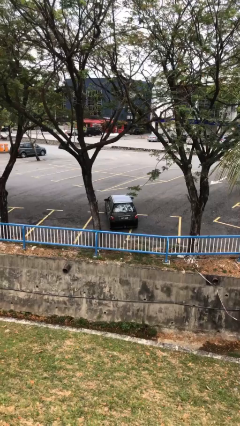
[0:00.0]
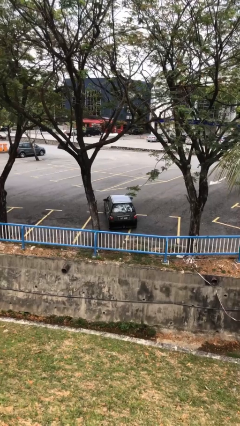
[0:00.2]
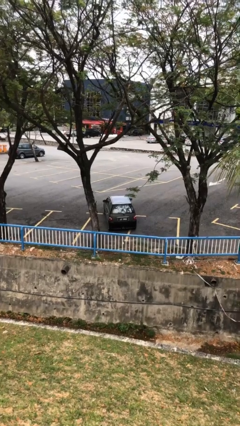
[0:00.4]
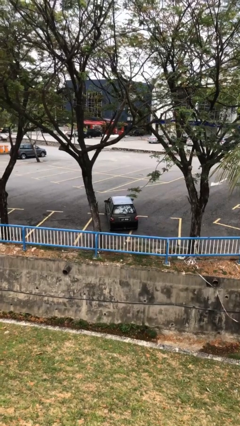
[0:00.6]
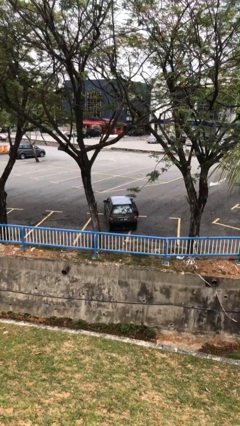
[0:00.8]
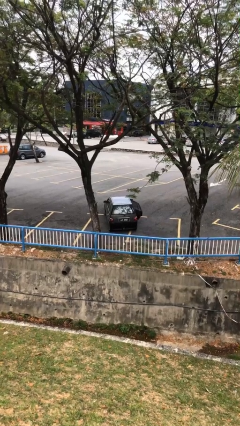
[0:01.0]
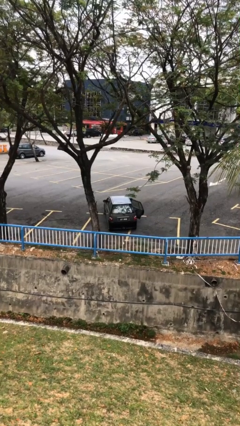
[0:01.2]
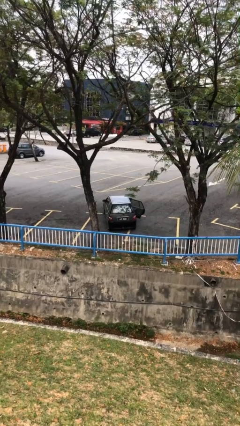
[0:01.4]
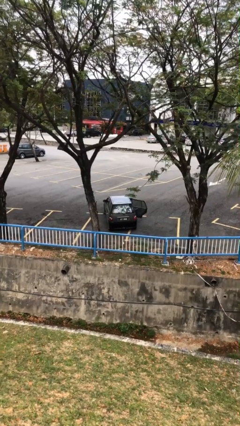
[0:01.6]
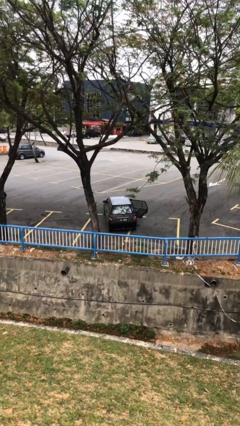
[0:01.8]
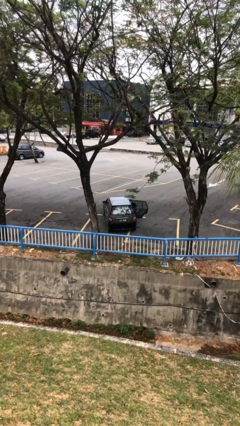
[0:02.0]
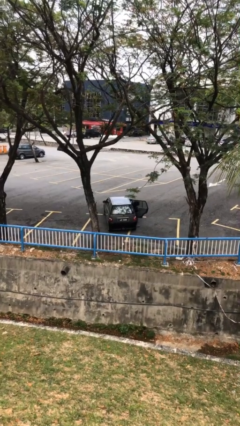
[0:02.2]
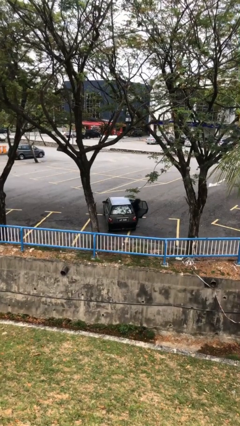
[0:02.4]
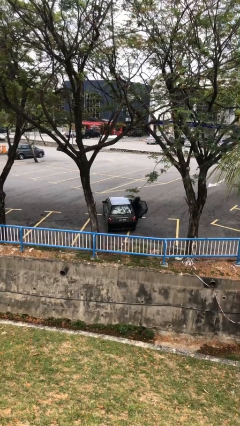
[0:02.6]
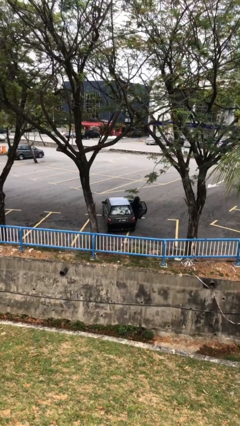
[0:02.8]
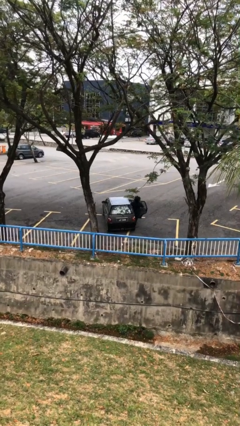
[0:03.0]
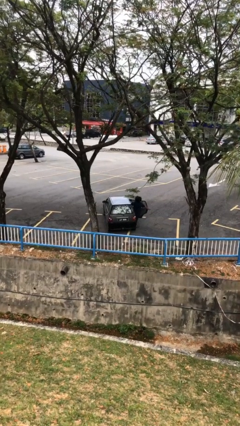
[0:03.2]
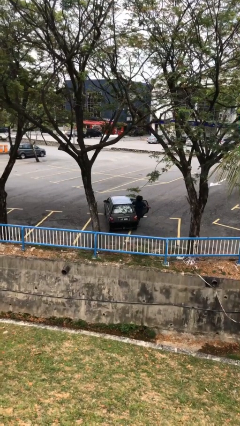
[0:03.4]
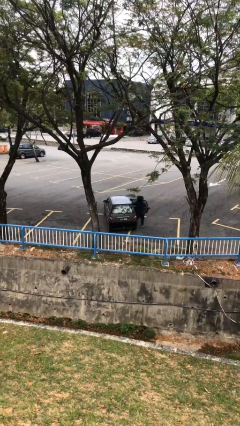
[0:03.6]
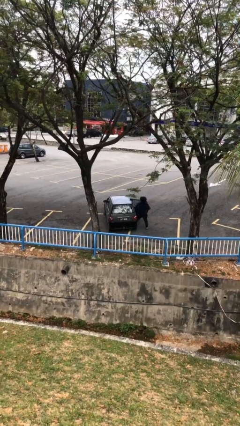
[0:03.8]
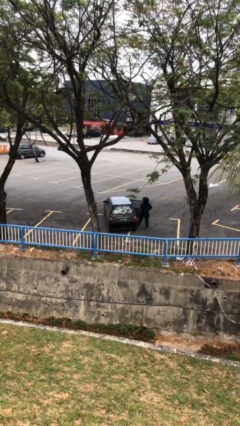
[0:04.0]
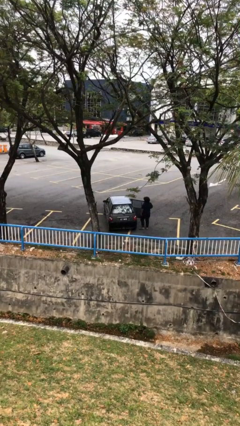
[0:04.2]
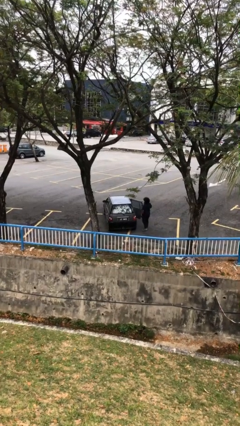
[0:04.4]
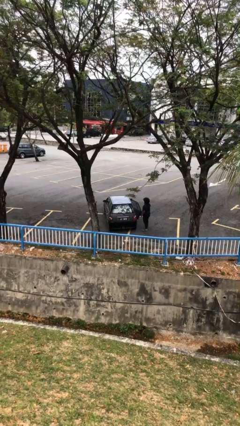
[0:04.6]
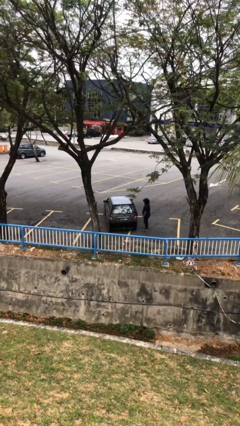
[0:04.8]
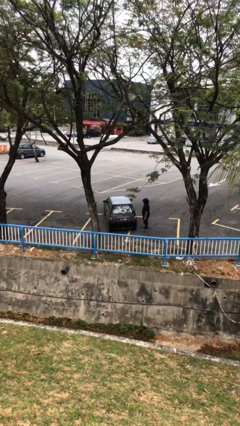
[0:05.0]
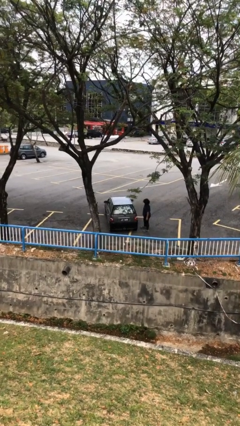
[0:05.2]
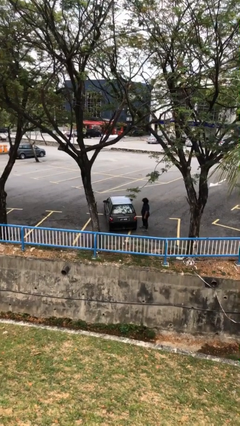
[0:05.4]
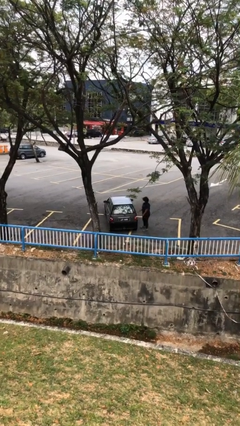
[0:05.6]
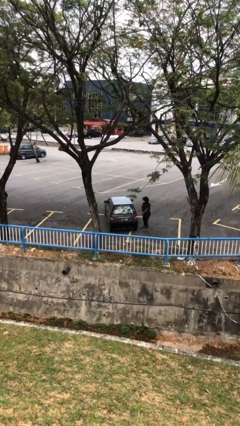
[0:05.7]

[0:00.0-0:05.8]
car drops off person

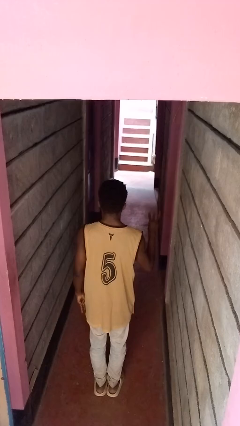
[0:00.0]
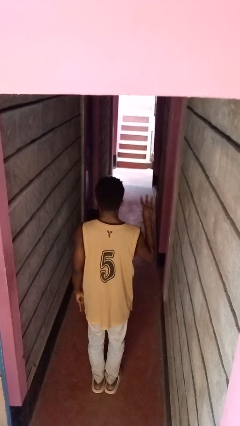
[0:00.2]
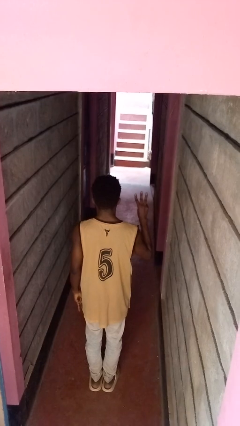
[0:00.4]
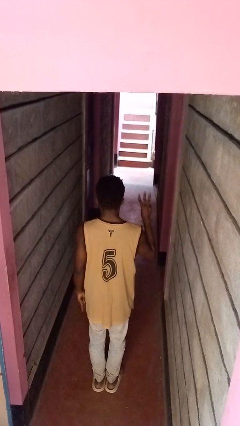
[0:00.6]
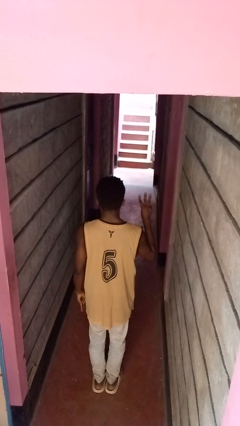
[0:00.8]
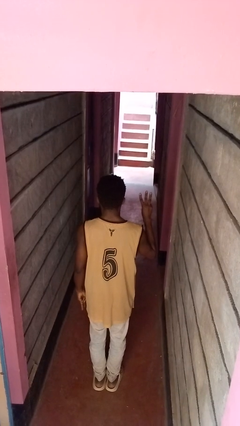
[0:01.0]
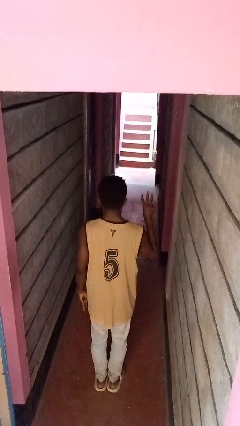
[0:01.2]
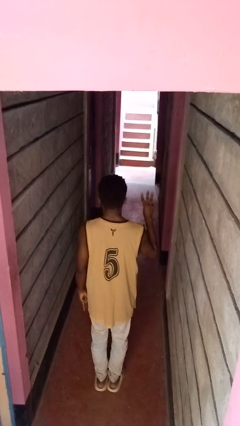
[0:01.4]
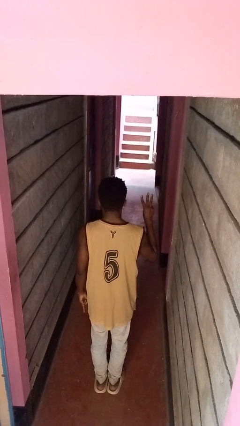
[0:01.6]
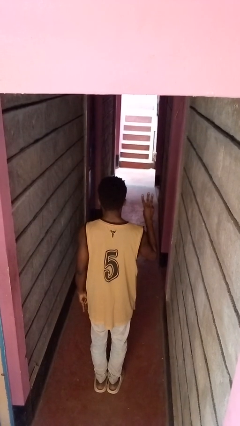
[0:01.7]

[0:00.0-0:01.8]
person gestures number three

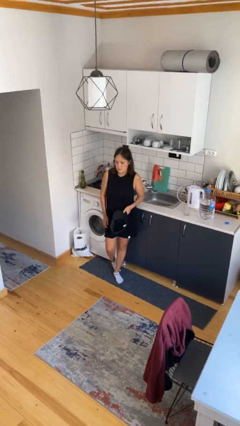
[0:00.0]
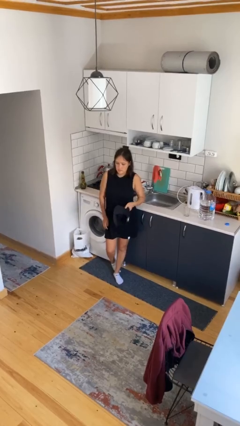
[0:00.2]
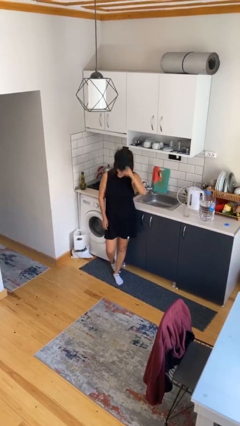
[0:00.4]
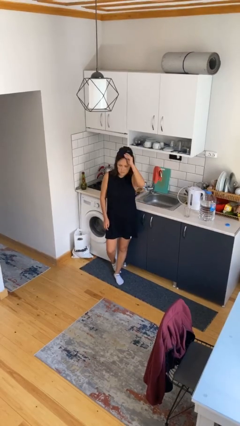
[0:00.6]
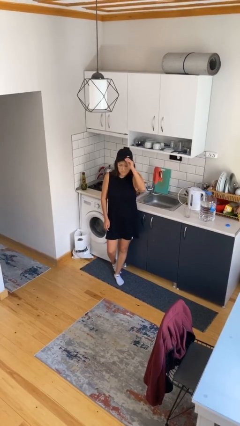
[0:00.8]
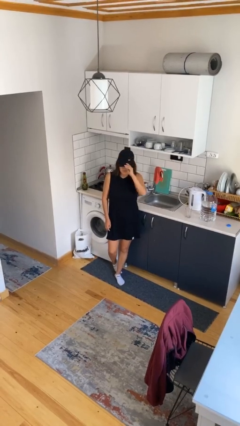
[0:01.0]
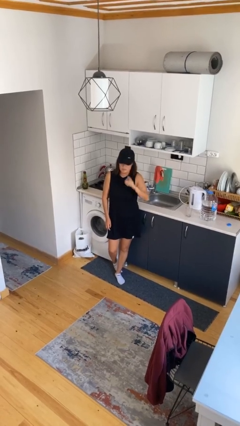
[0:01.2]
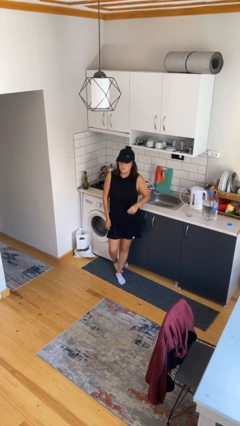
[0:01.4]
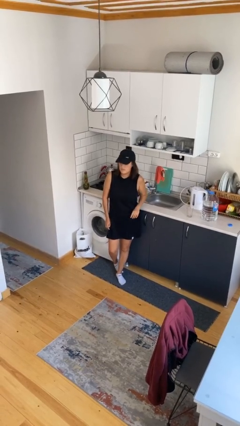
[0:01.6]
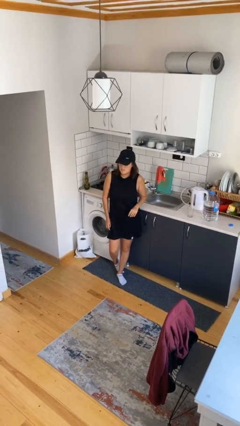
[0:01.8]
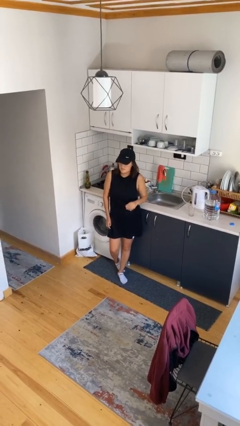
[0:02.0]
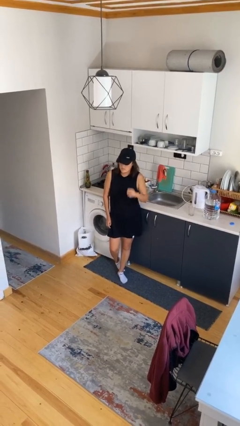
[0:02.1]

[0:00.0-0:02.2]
person puts on hat

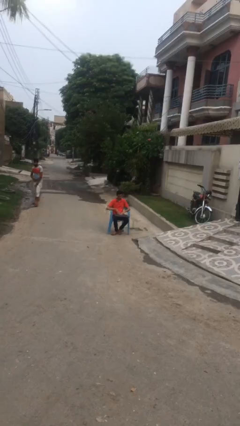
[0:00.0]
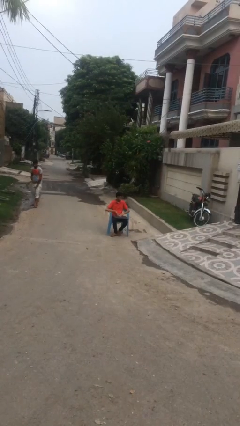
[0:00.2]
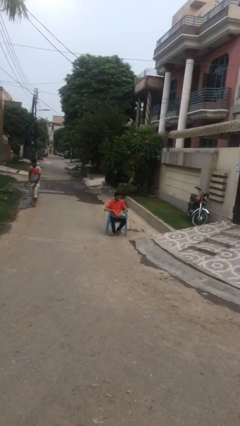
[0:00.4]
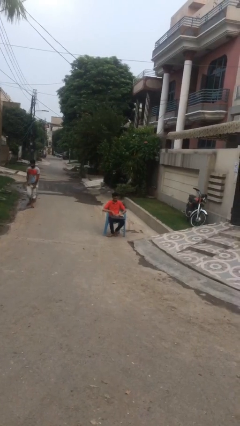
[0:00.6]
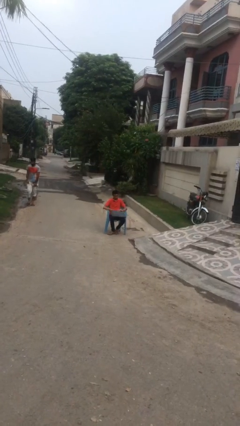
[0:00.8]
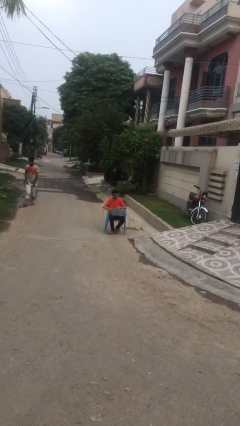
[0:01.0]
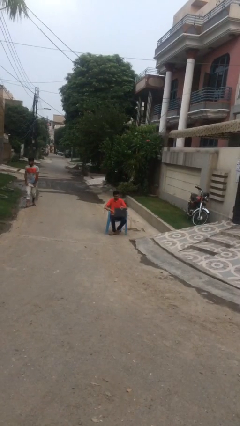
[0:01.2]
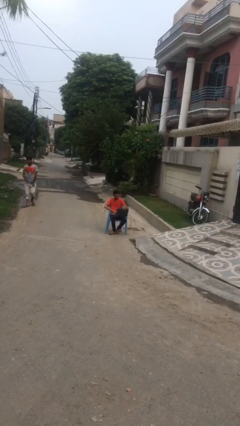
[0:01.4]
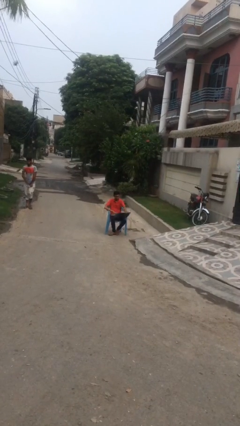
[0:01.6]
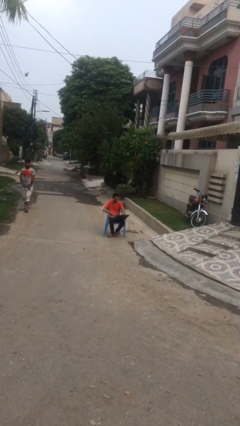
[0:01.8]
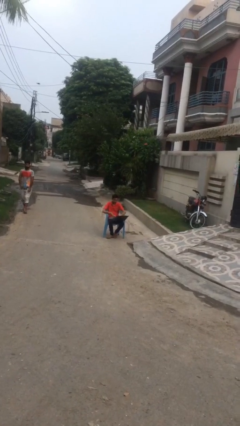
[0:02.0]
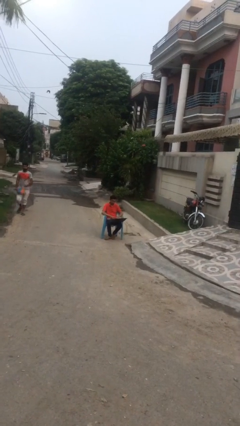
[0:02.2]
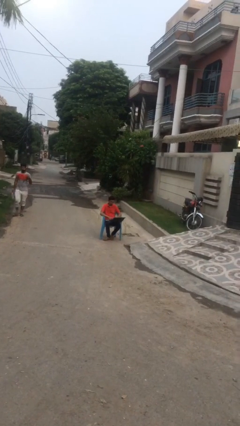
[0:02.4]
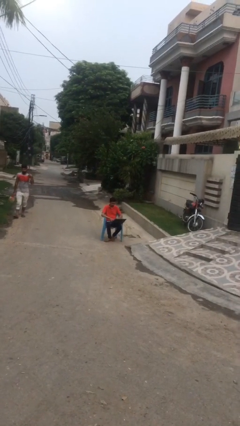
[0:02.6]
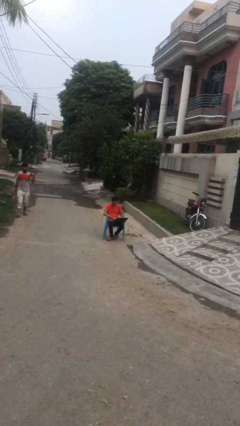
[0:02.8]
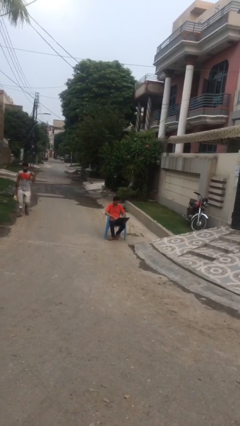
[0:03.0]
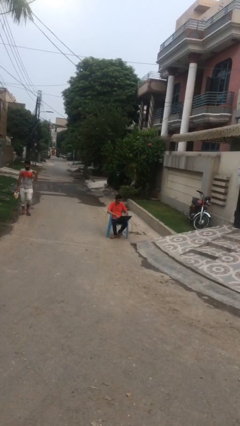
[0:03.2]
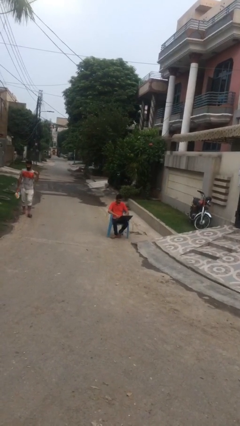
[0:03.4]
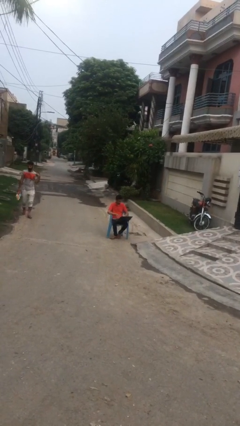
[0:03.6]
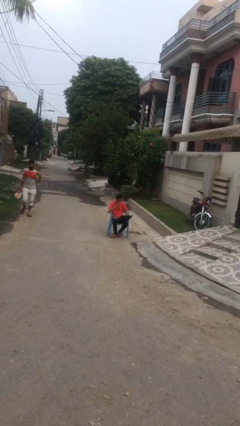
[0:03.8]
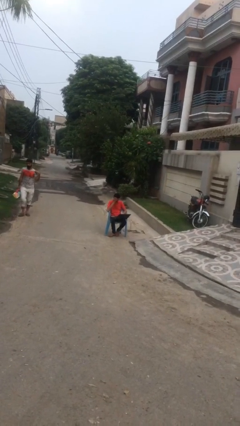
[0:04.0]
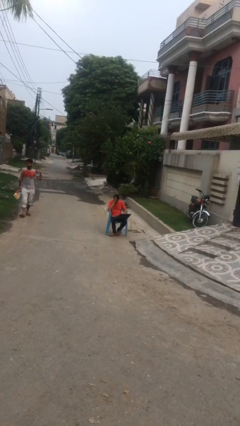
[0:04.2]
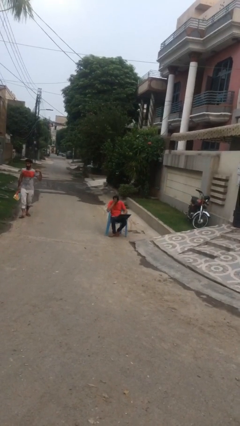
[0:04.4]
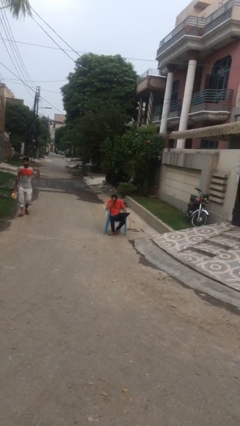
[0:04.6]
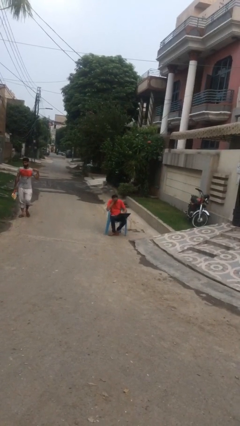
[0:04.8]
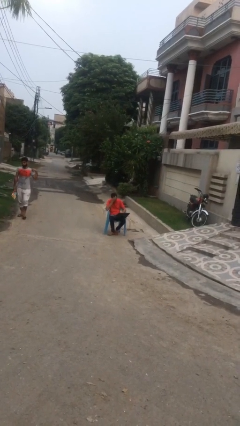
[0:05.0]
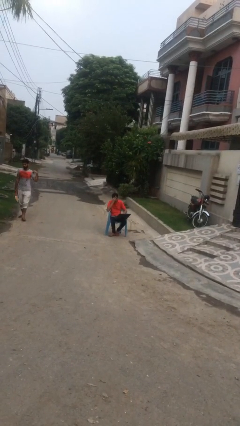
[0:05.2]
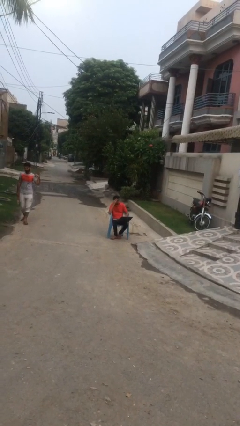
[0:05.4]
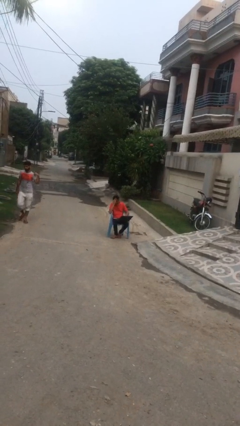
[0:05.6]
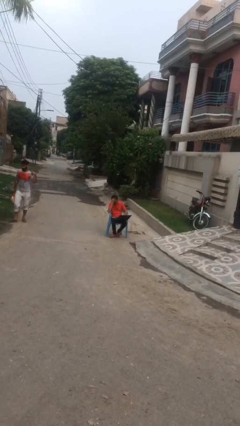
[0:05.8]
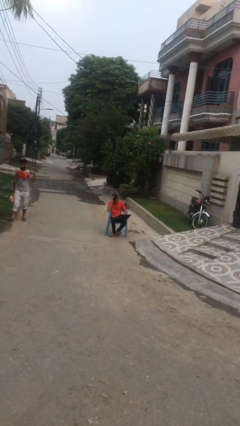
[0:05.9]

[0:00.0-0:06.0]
person interacts with laptop

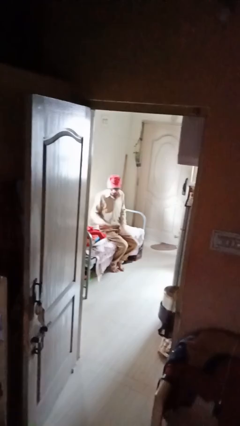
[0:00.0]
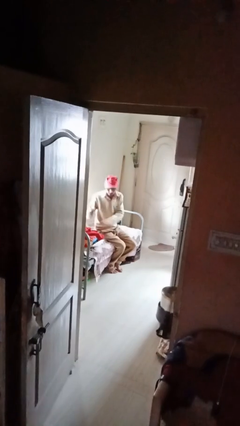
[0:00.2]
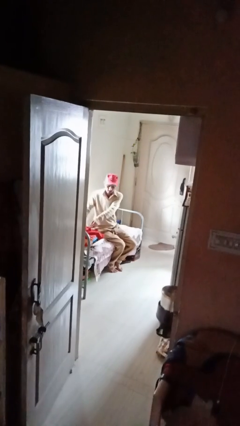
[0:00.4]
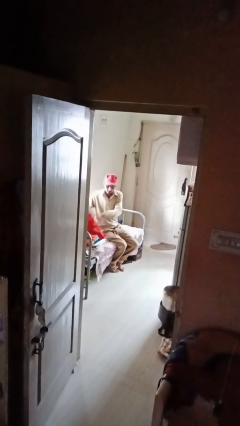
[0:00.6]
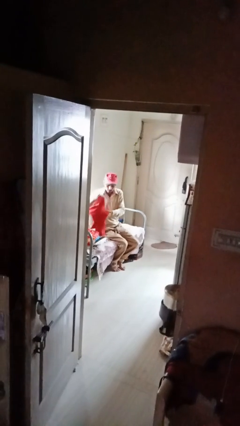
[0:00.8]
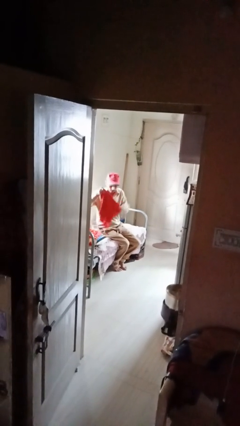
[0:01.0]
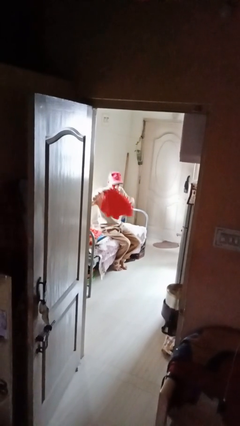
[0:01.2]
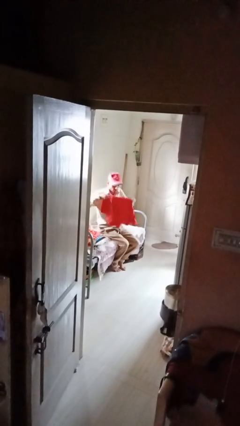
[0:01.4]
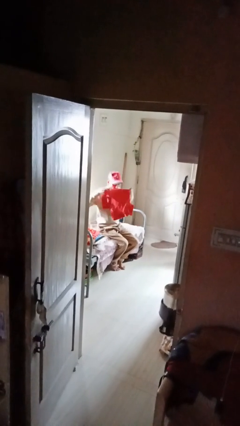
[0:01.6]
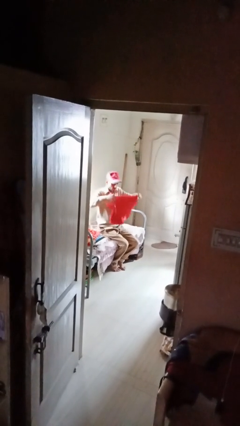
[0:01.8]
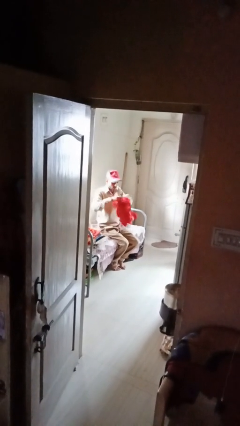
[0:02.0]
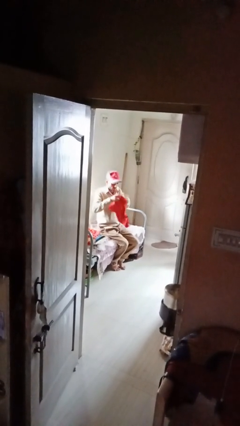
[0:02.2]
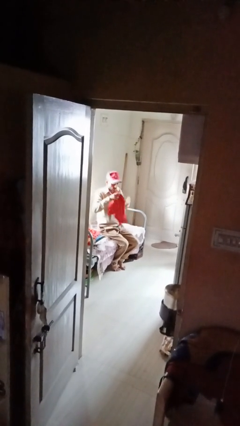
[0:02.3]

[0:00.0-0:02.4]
person folds shirt
